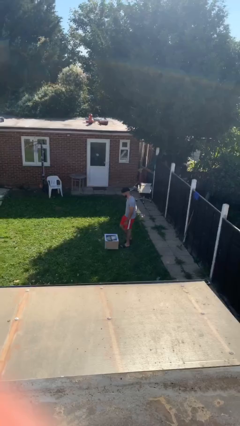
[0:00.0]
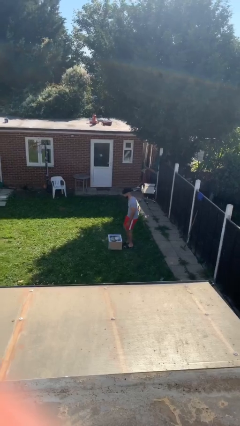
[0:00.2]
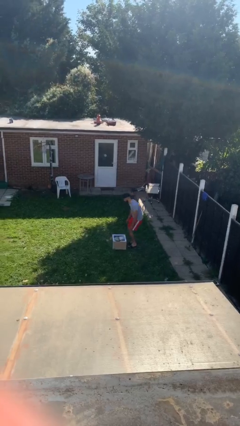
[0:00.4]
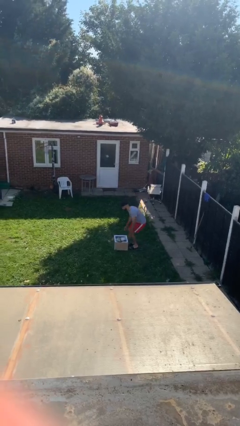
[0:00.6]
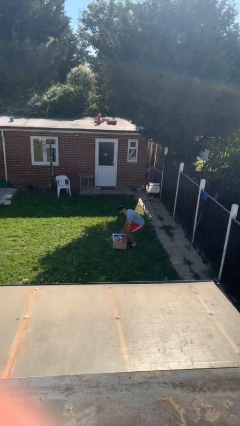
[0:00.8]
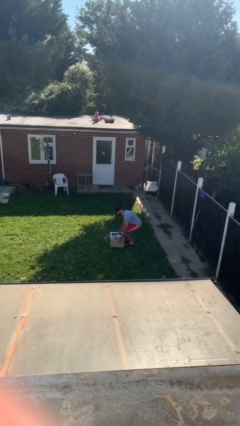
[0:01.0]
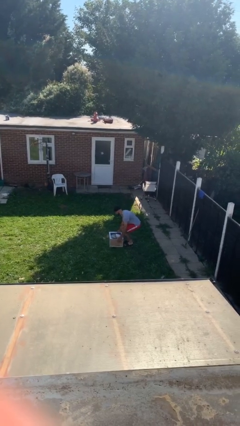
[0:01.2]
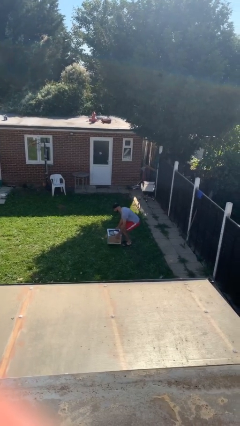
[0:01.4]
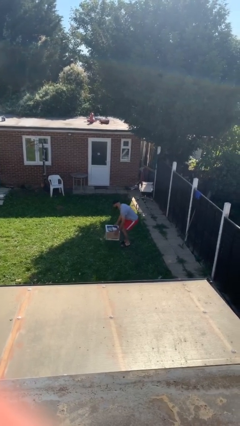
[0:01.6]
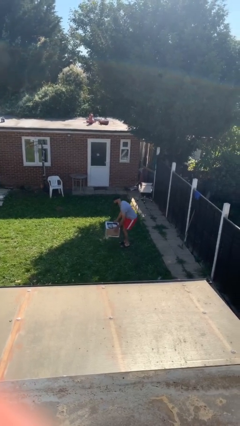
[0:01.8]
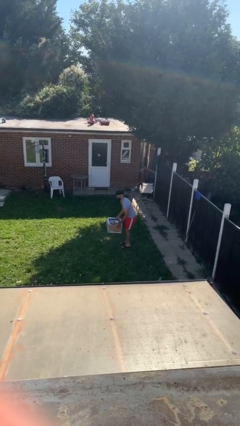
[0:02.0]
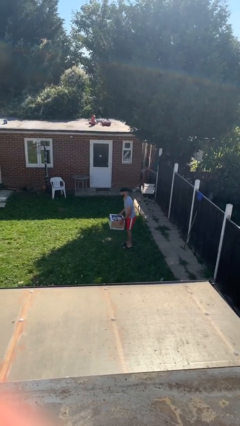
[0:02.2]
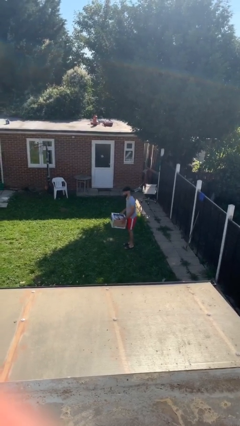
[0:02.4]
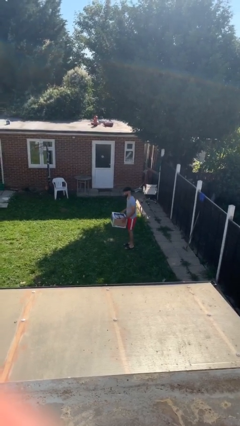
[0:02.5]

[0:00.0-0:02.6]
person picks up object from floor

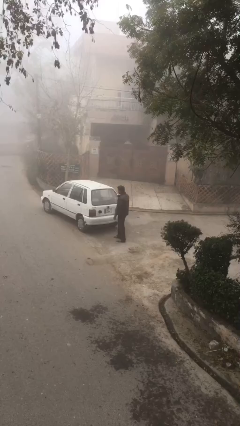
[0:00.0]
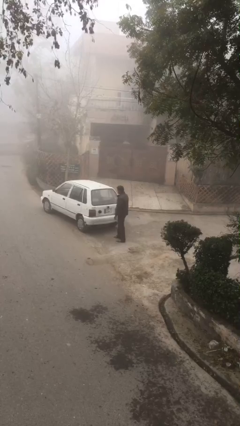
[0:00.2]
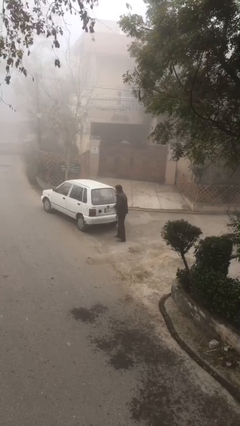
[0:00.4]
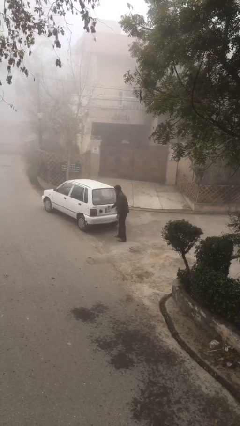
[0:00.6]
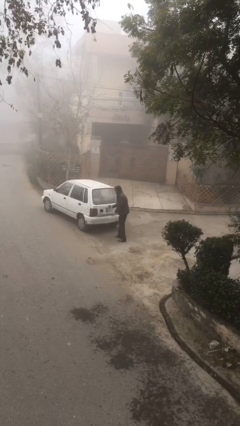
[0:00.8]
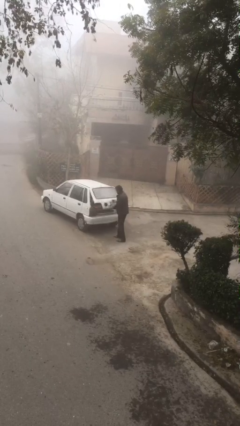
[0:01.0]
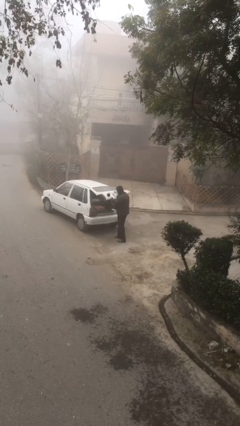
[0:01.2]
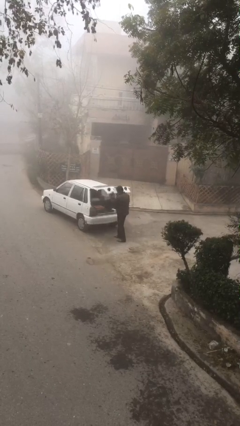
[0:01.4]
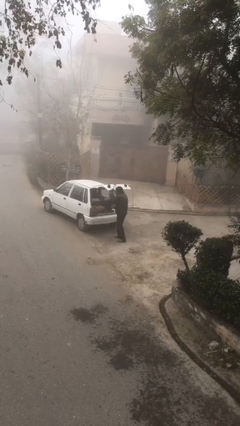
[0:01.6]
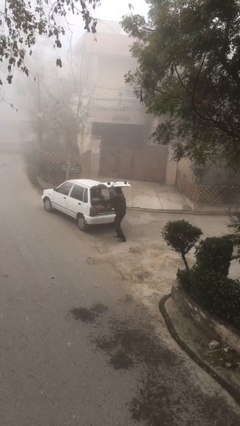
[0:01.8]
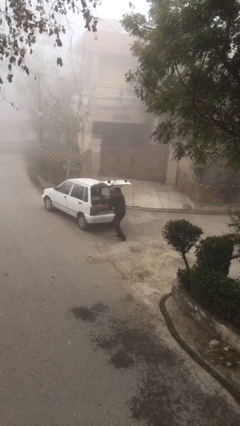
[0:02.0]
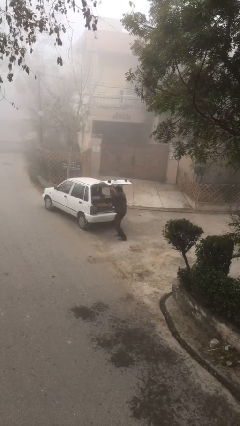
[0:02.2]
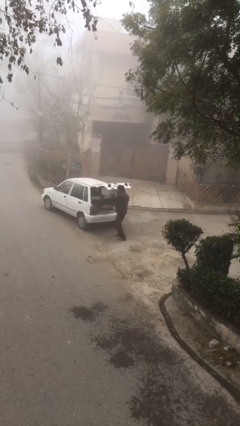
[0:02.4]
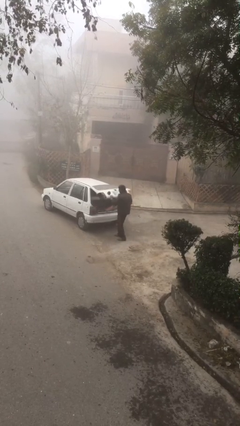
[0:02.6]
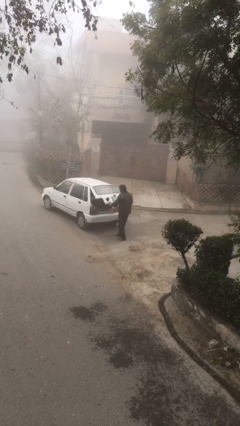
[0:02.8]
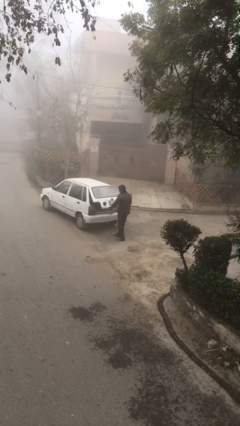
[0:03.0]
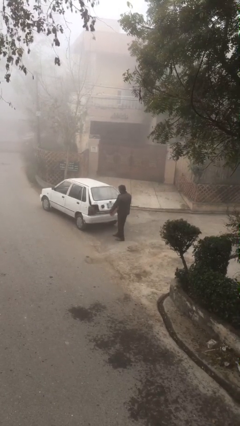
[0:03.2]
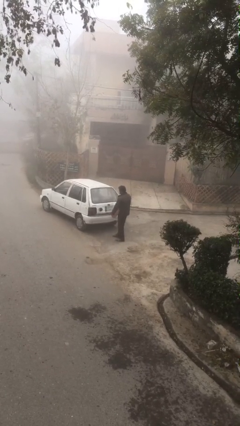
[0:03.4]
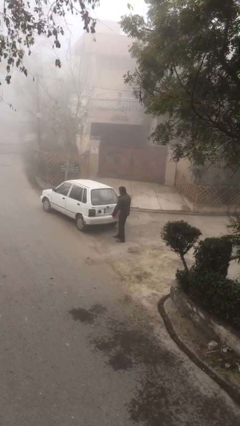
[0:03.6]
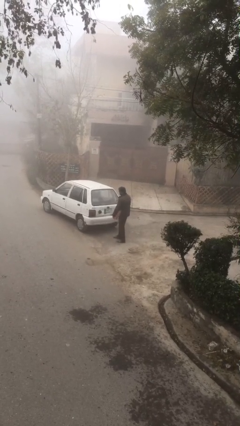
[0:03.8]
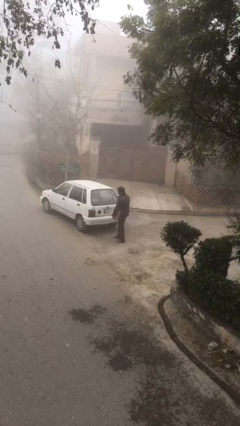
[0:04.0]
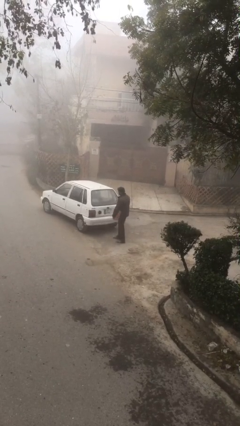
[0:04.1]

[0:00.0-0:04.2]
person unloads car

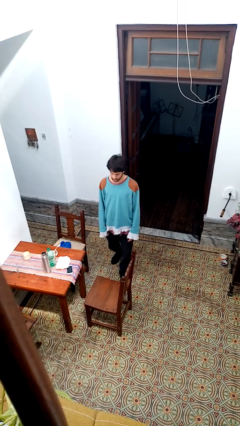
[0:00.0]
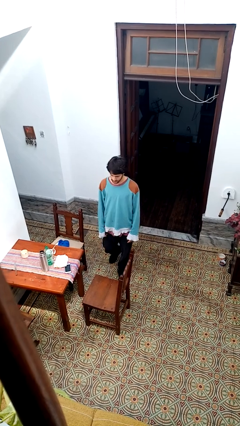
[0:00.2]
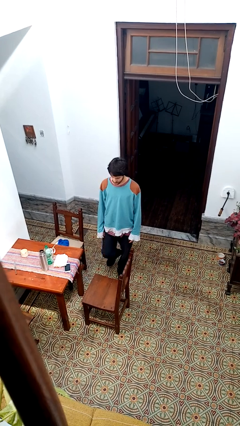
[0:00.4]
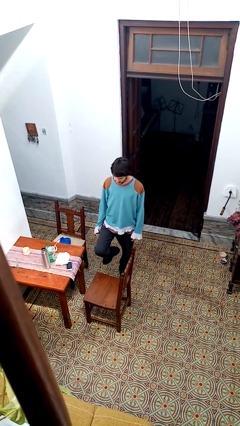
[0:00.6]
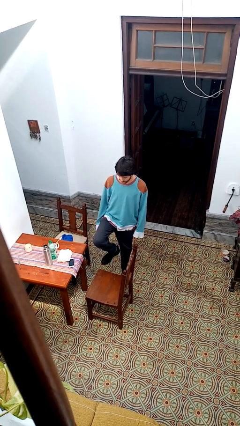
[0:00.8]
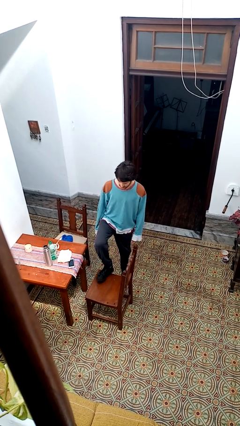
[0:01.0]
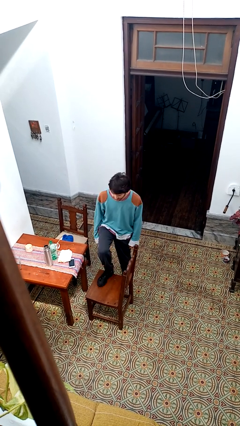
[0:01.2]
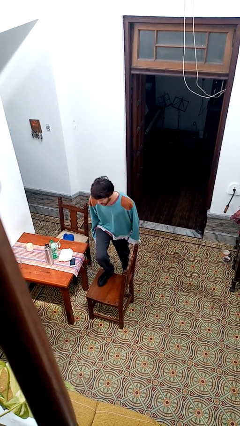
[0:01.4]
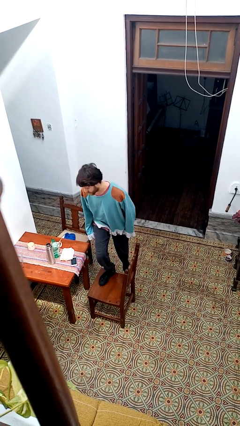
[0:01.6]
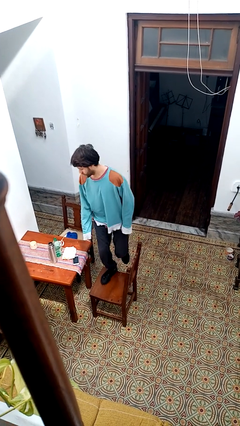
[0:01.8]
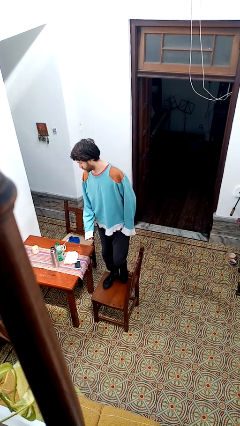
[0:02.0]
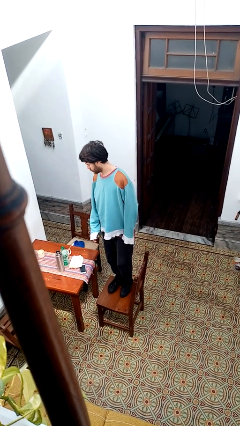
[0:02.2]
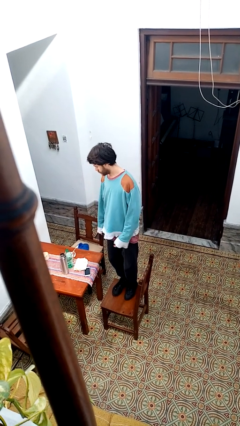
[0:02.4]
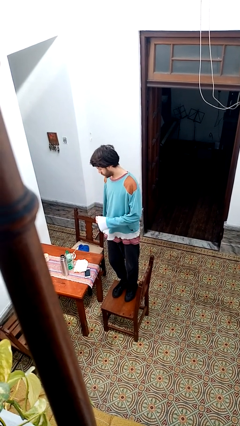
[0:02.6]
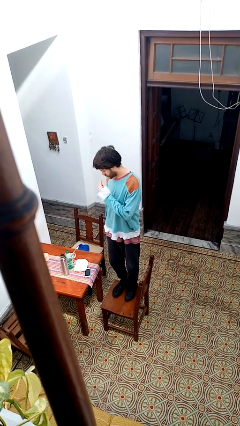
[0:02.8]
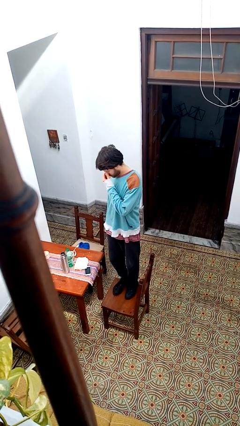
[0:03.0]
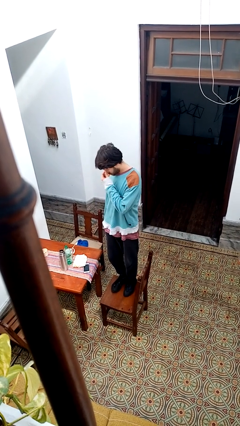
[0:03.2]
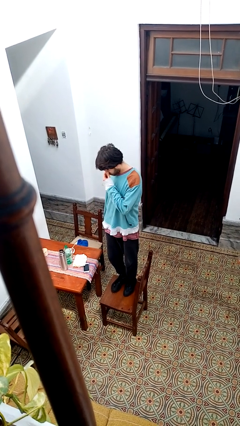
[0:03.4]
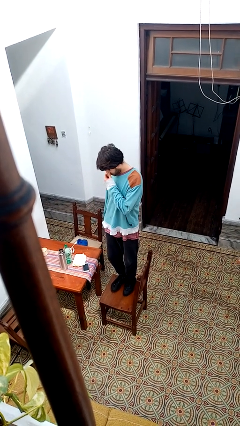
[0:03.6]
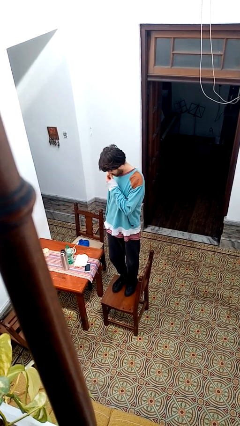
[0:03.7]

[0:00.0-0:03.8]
person climbs on chair

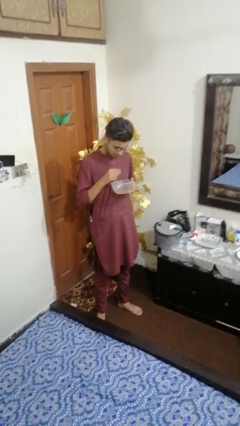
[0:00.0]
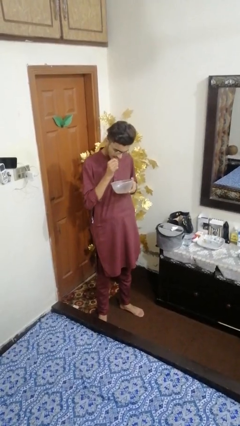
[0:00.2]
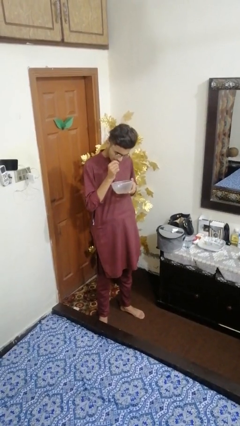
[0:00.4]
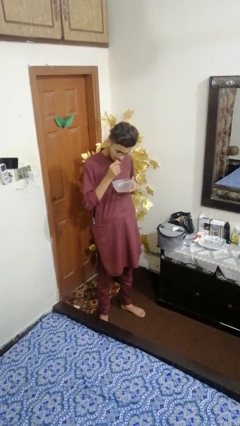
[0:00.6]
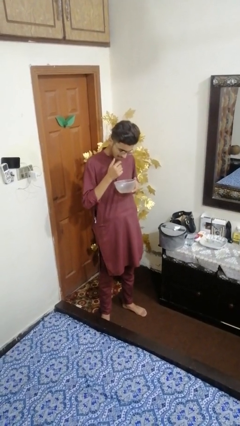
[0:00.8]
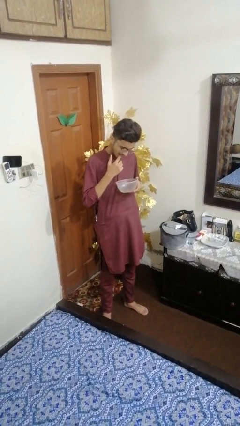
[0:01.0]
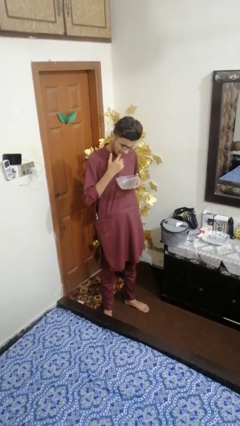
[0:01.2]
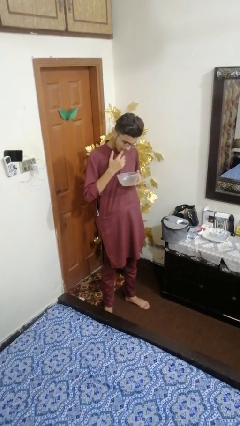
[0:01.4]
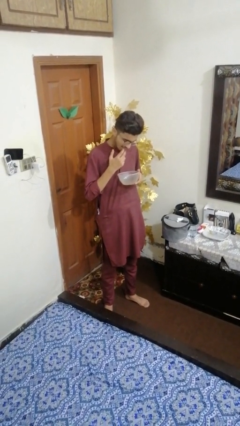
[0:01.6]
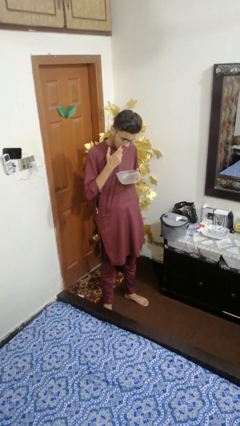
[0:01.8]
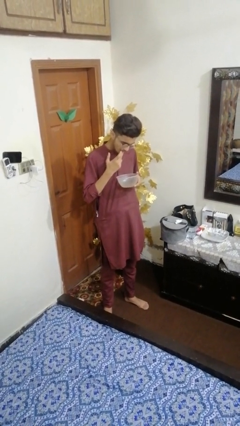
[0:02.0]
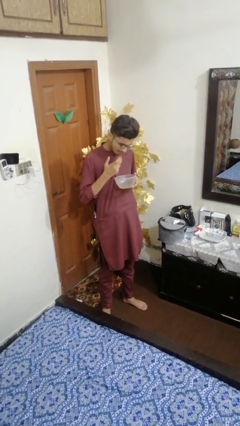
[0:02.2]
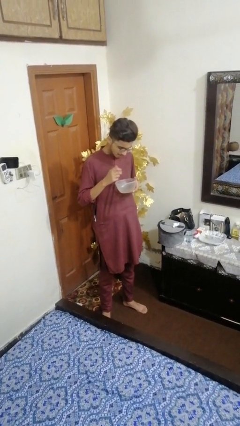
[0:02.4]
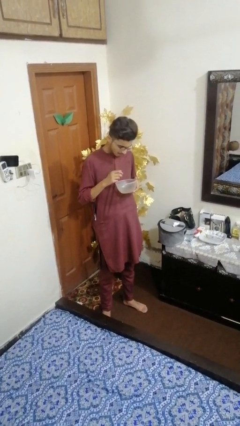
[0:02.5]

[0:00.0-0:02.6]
person licks fingers

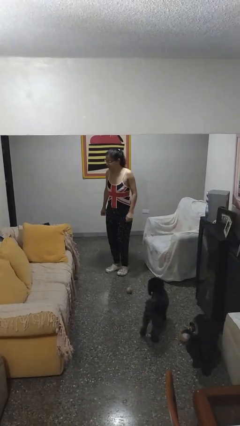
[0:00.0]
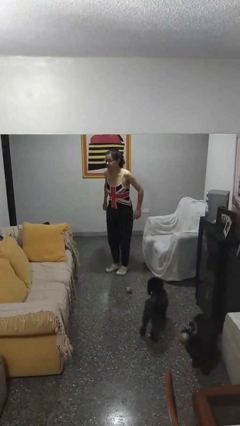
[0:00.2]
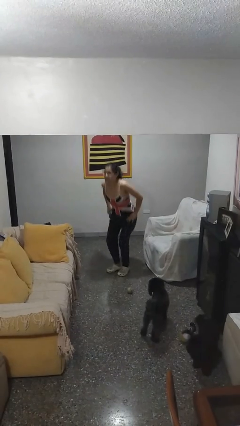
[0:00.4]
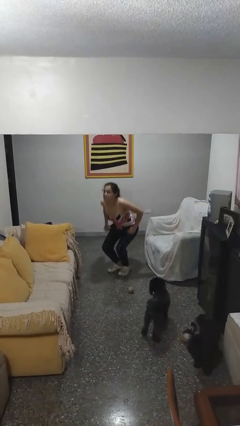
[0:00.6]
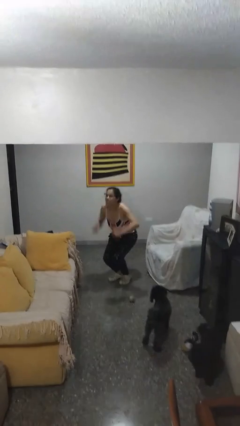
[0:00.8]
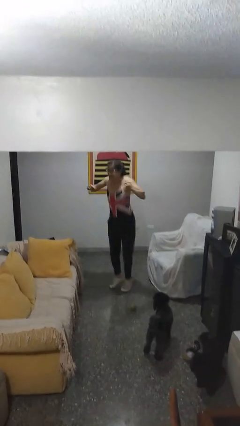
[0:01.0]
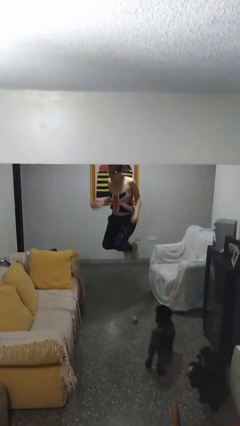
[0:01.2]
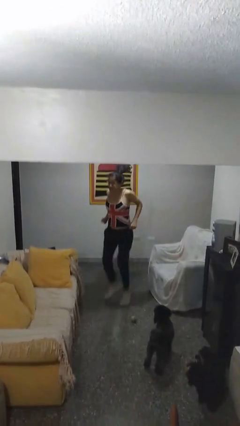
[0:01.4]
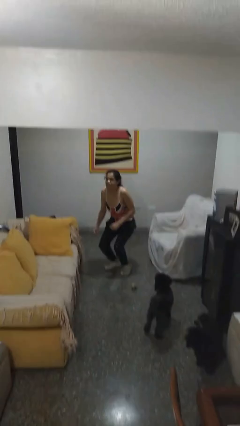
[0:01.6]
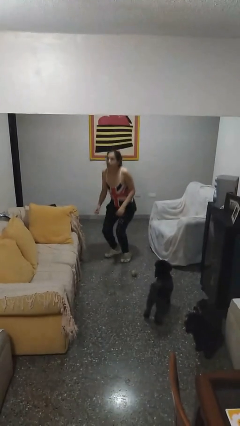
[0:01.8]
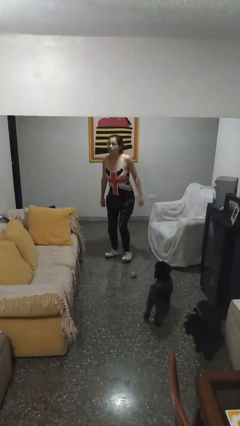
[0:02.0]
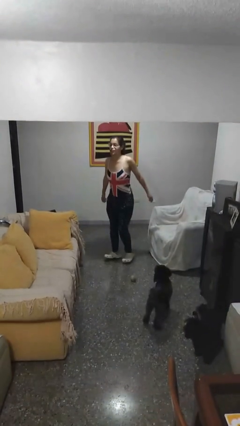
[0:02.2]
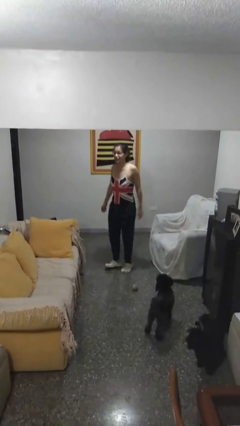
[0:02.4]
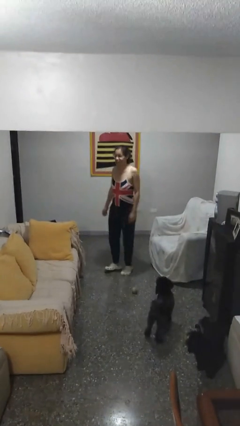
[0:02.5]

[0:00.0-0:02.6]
person jumps

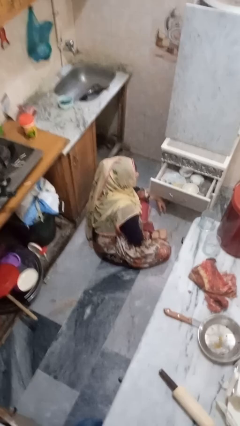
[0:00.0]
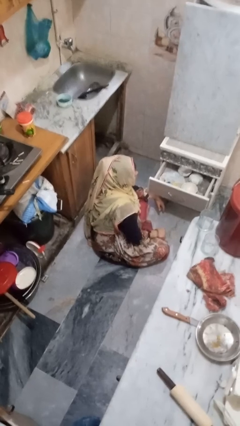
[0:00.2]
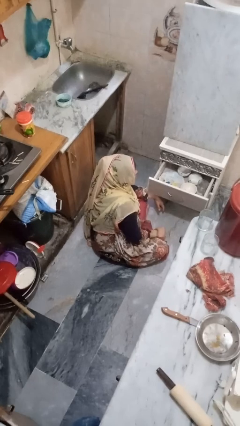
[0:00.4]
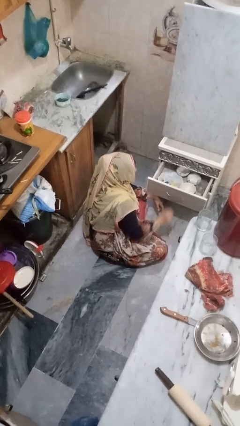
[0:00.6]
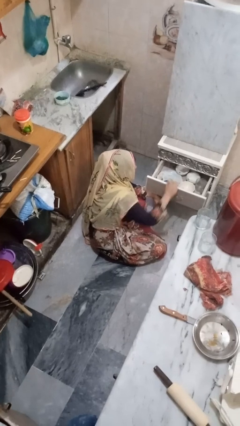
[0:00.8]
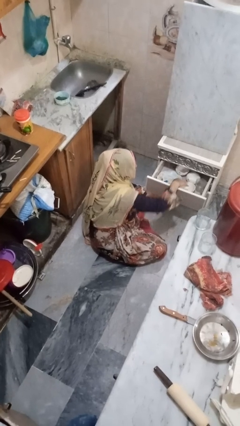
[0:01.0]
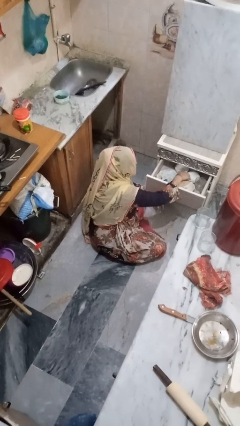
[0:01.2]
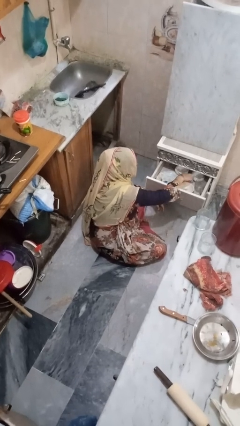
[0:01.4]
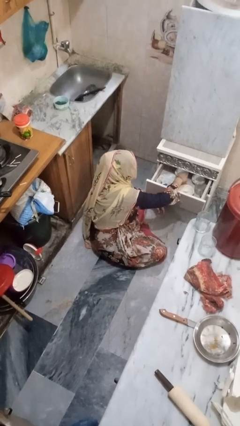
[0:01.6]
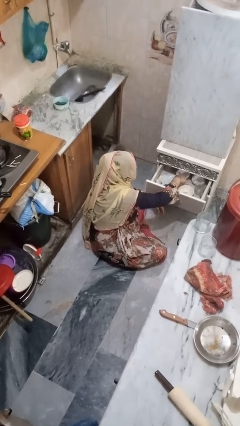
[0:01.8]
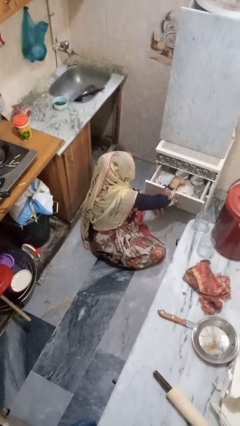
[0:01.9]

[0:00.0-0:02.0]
person searches in kitchen drawer
